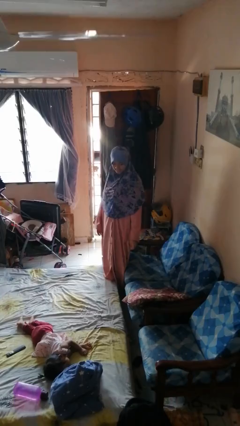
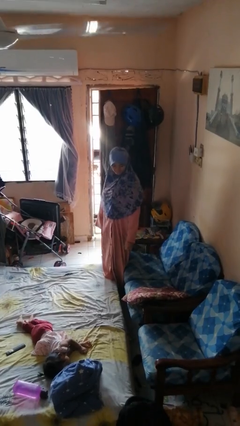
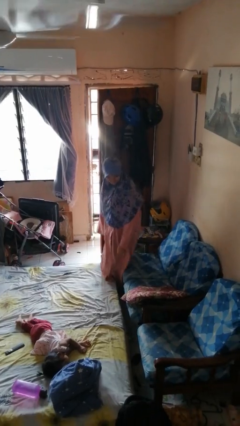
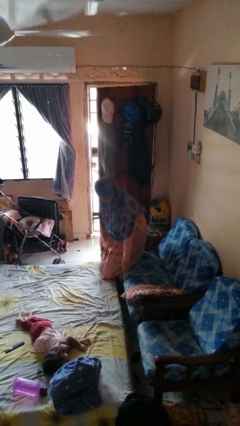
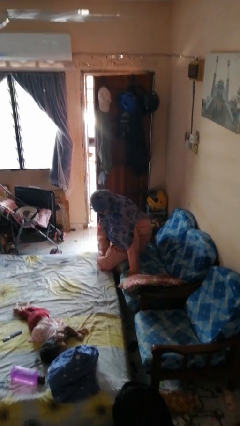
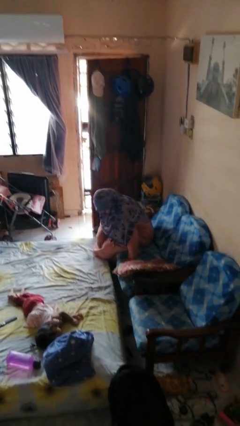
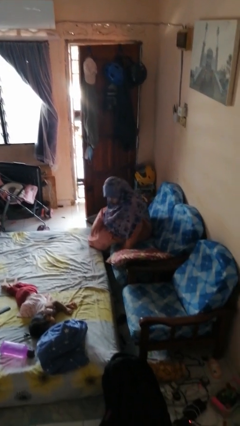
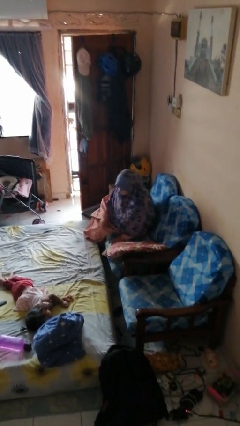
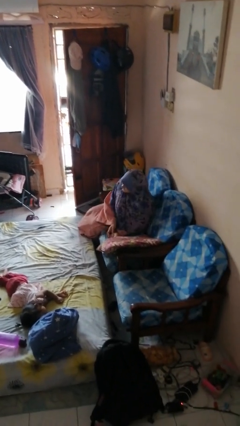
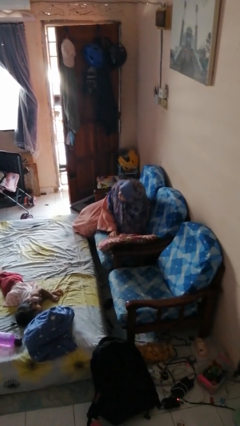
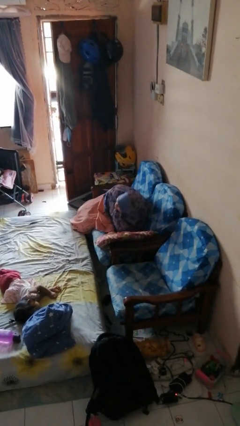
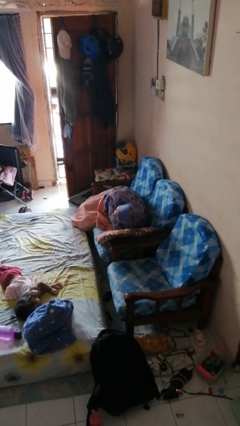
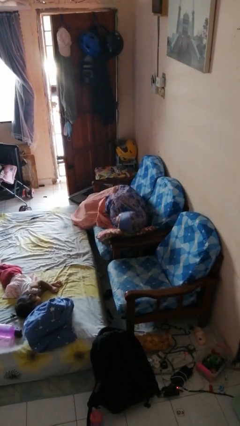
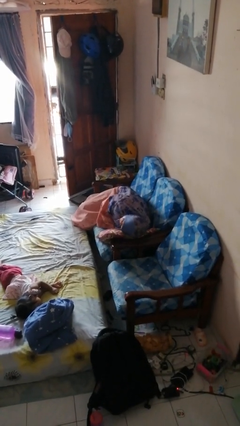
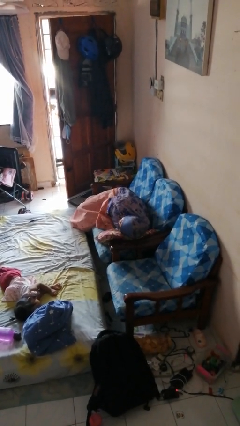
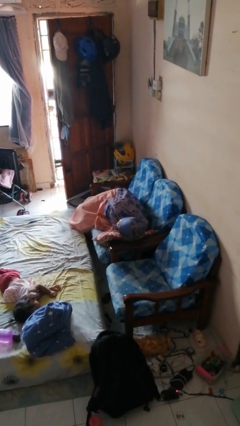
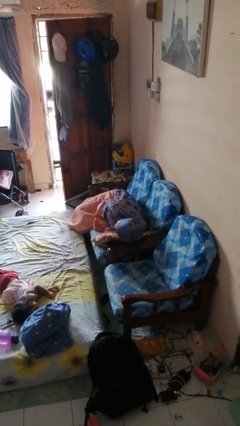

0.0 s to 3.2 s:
person lies down on couch

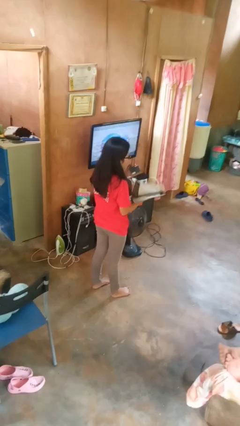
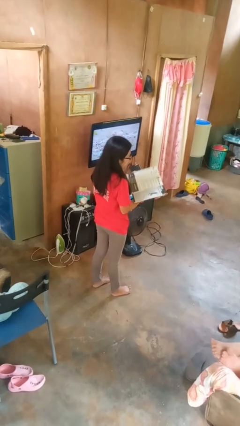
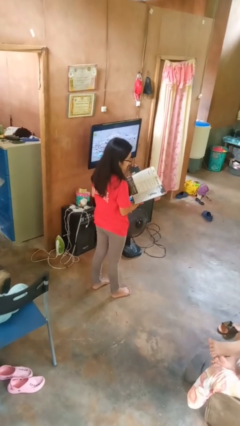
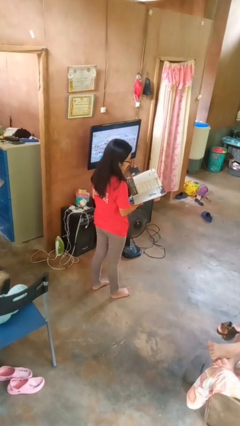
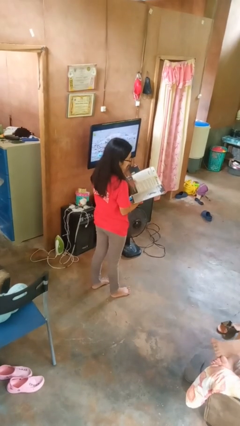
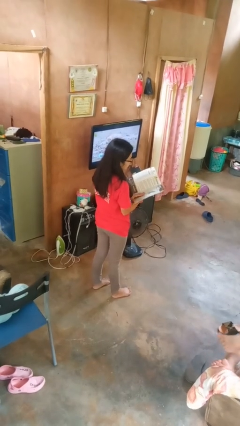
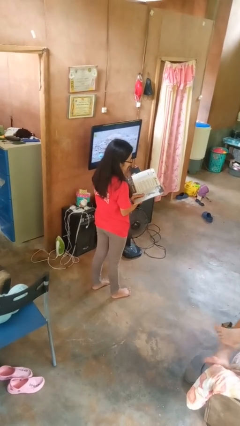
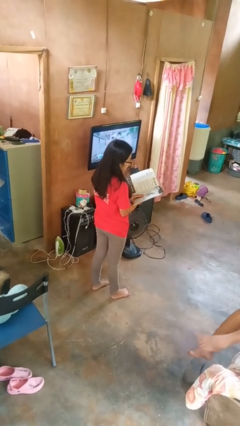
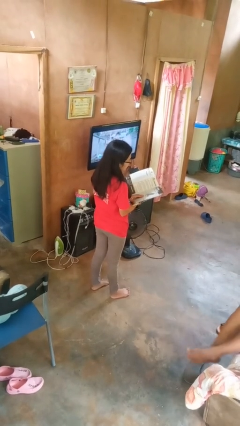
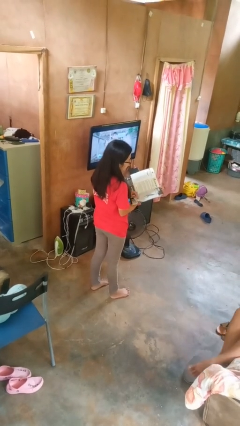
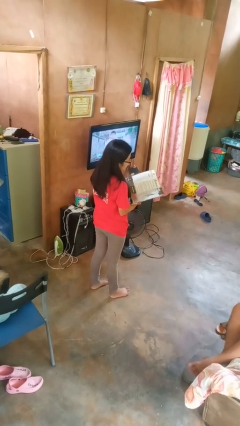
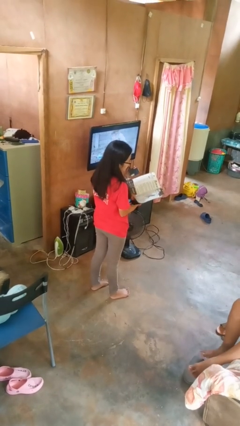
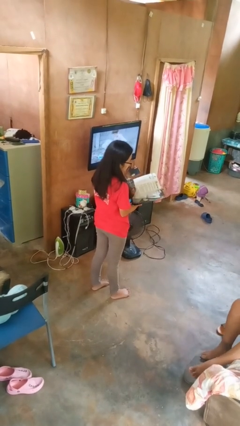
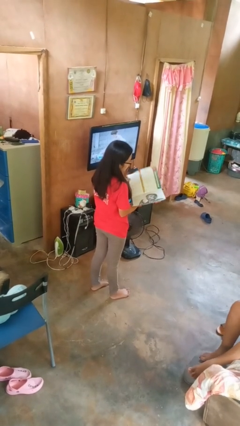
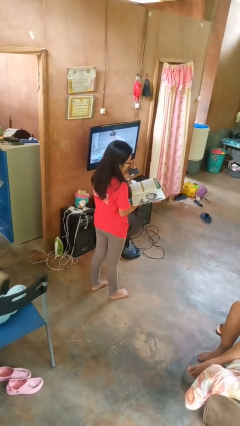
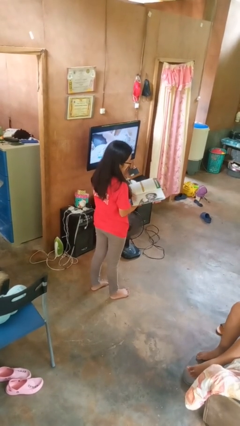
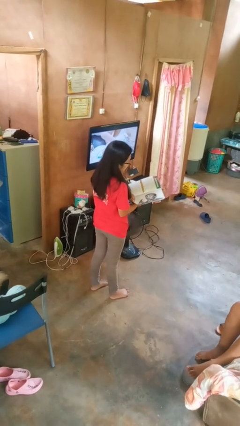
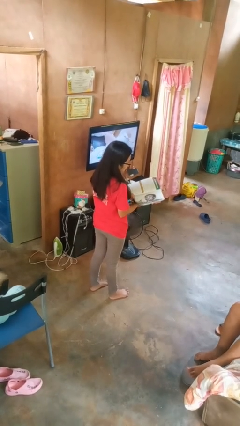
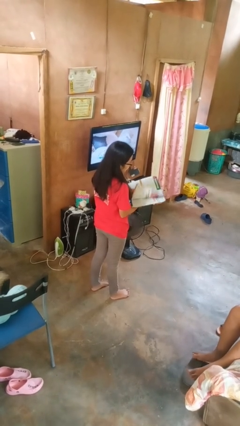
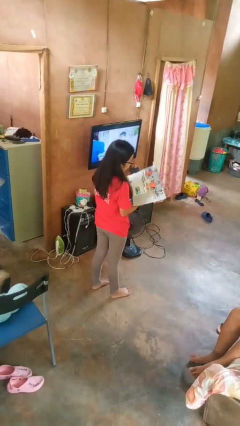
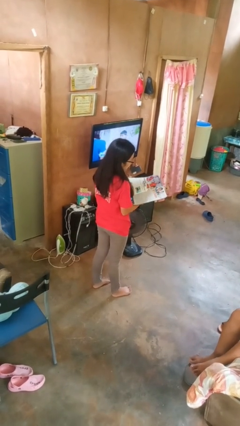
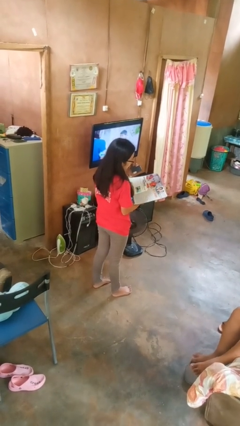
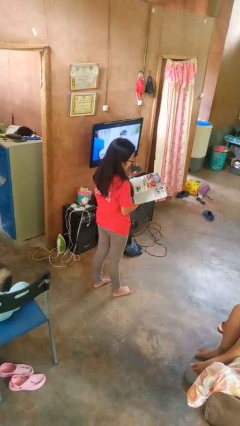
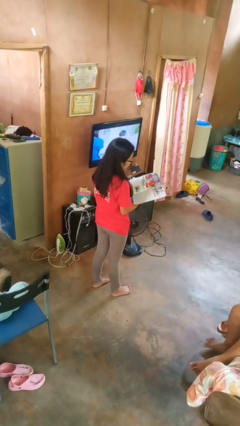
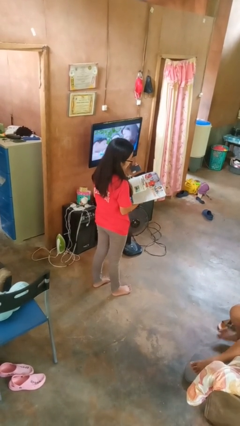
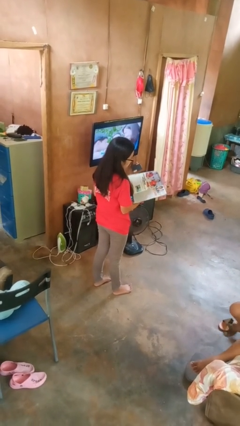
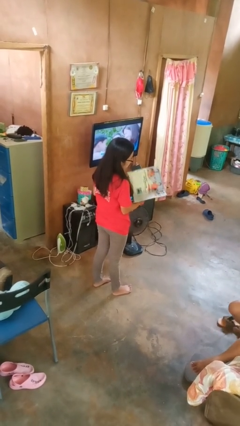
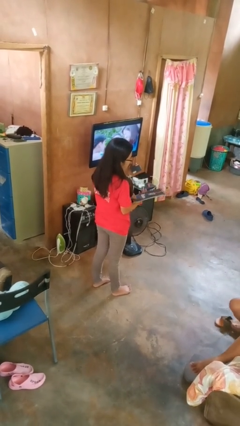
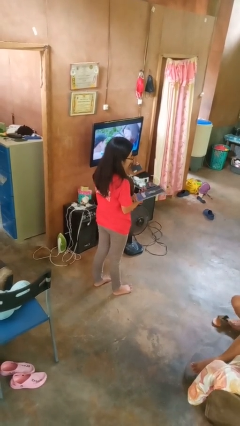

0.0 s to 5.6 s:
person reads magazine

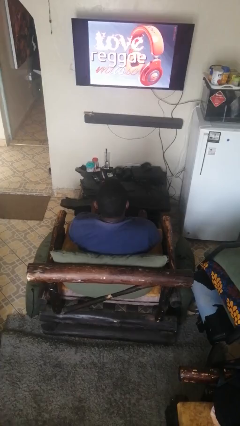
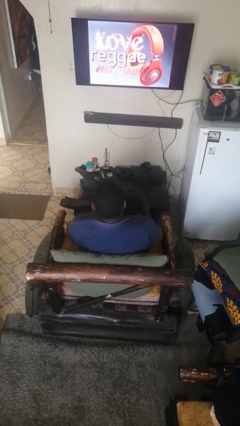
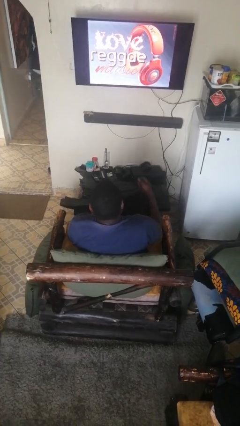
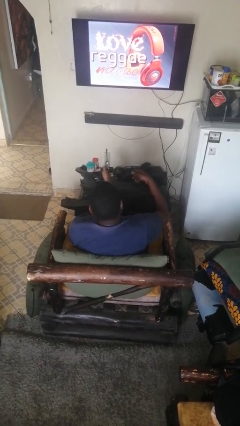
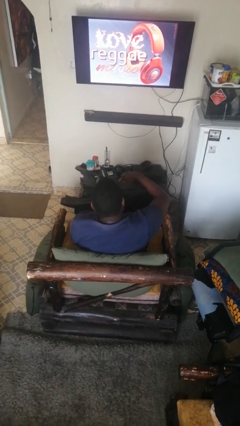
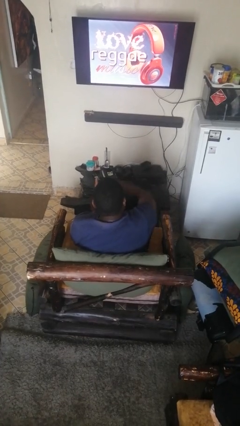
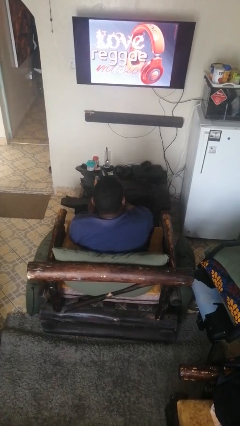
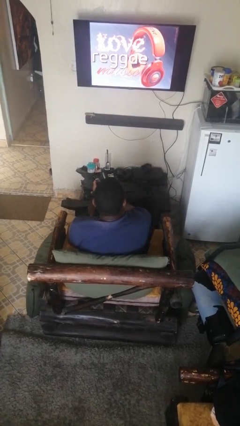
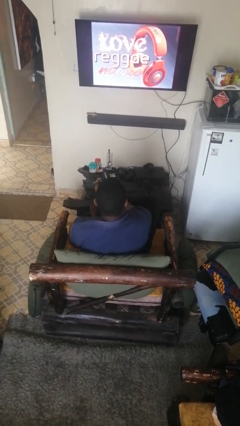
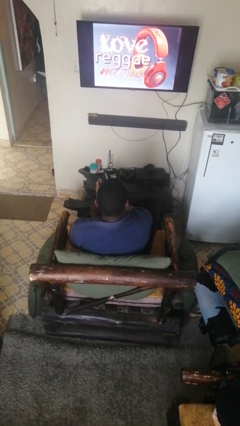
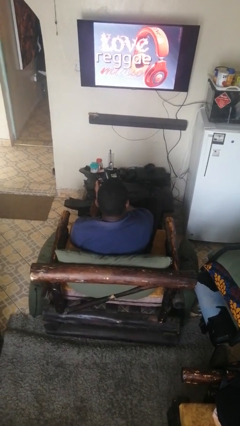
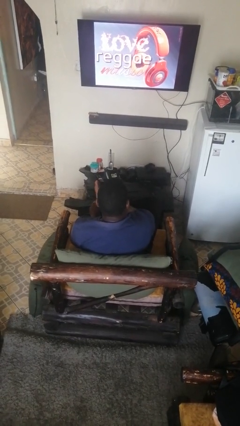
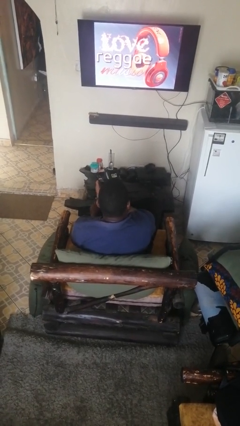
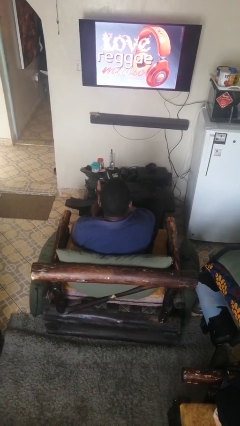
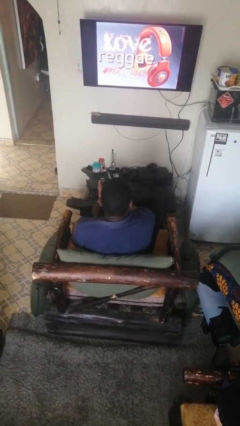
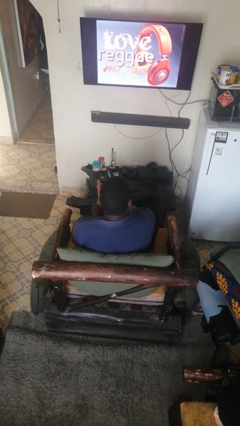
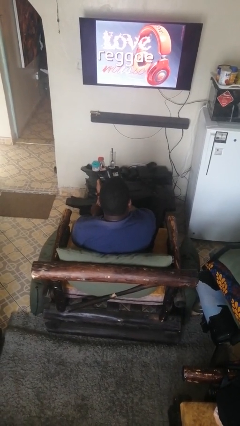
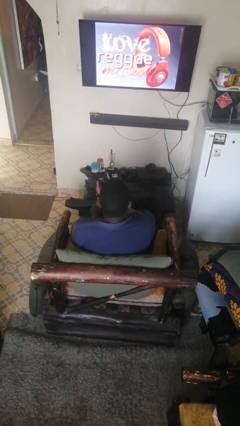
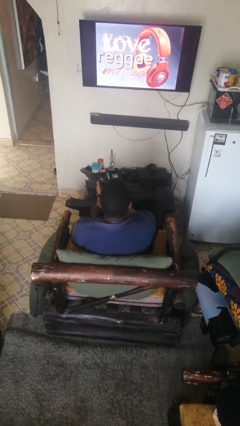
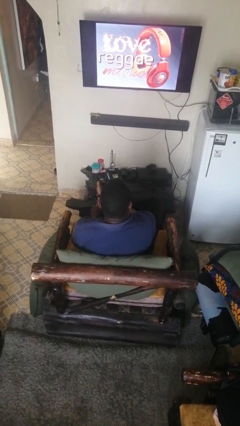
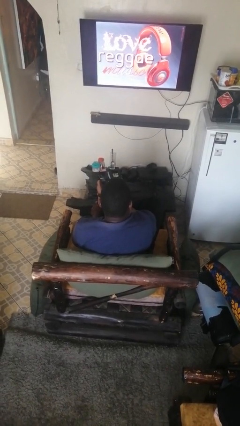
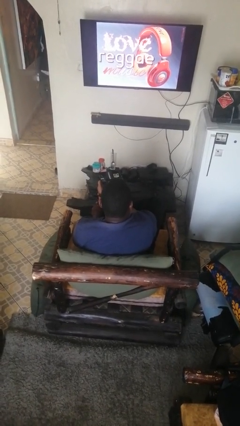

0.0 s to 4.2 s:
person rubs foot

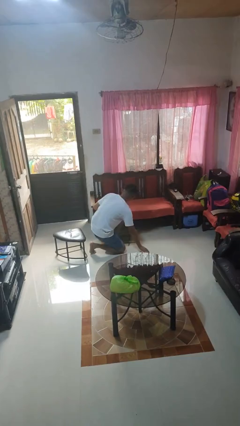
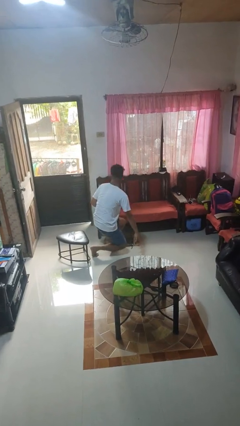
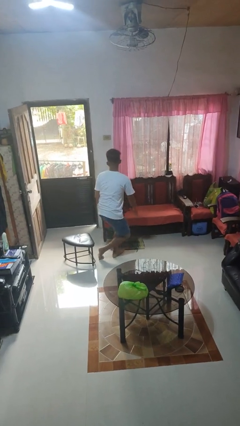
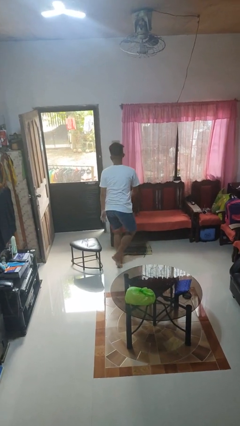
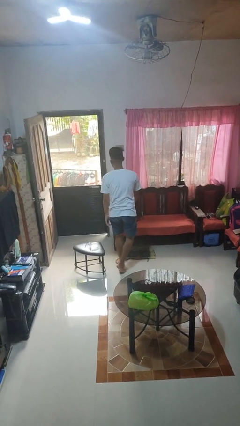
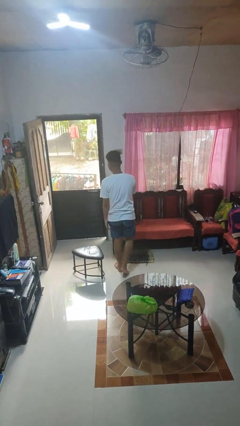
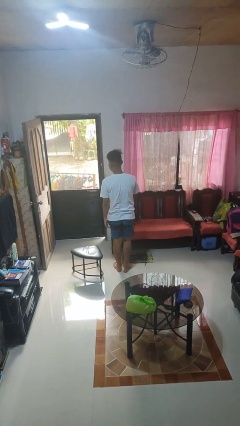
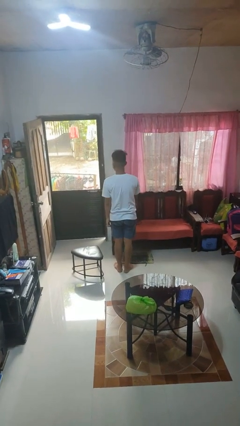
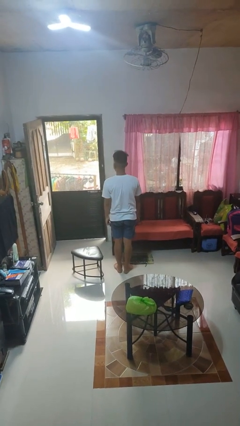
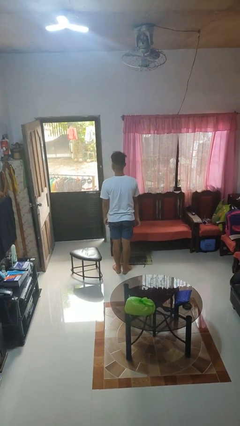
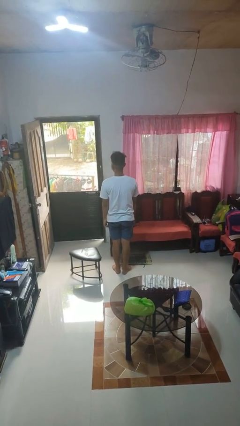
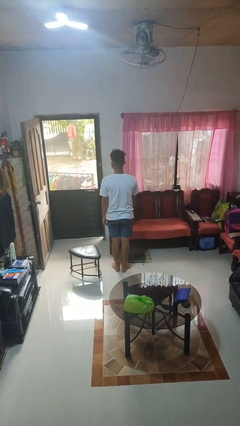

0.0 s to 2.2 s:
person stands up from floor

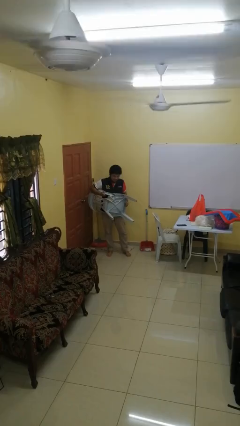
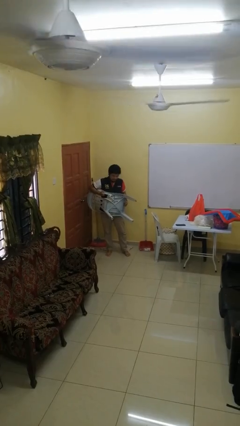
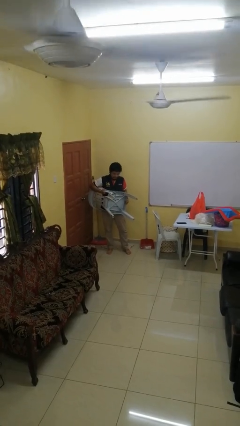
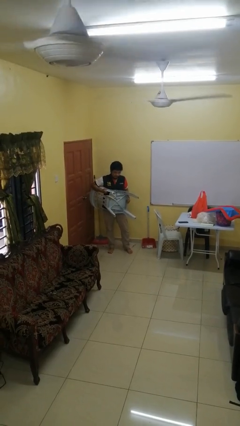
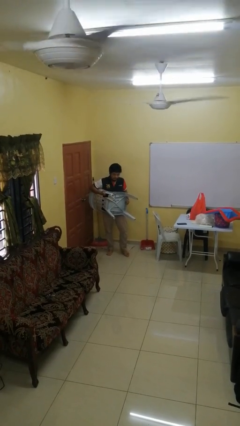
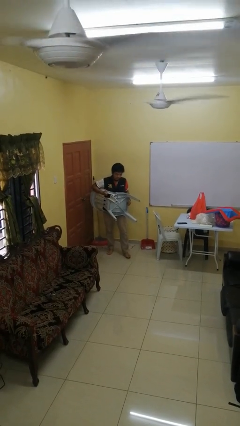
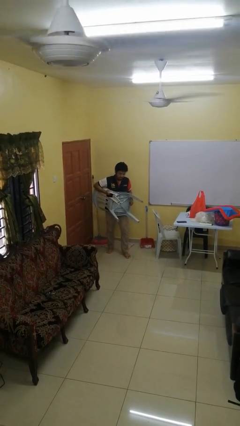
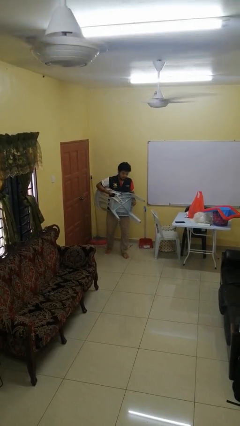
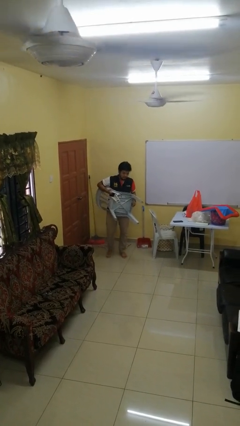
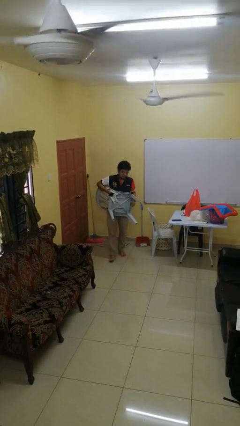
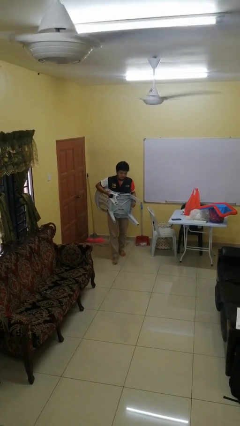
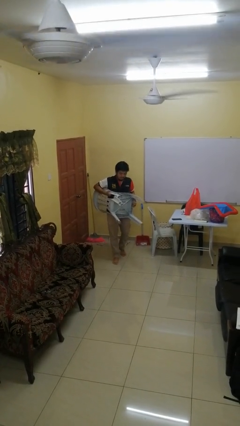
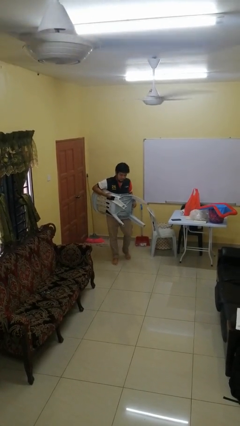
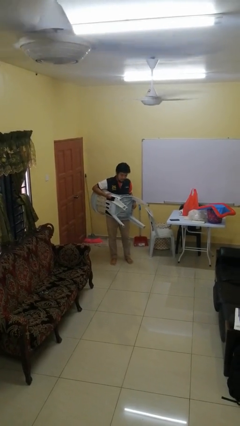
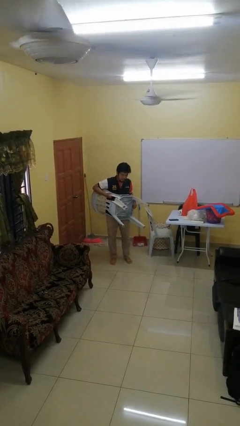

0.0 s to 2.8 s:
person carries furniture

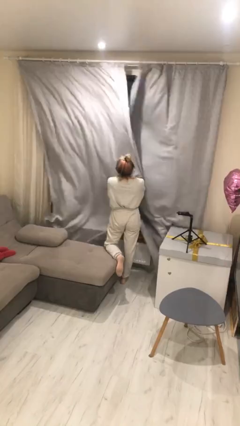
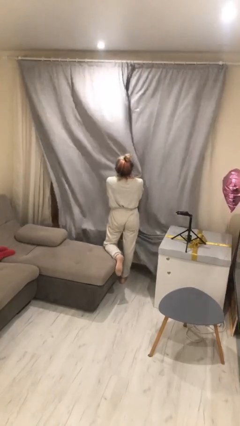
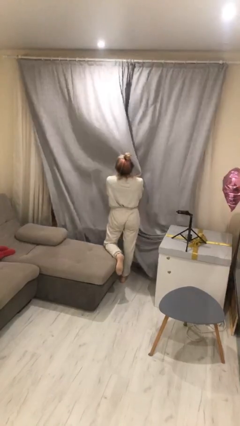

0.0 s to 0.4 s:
person closes curtains
